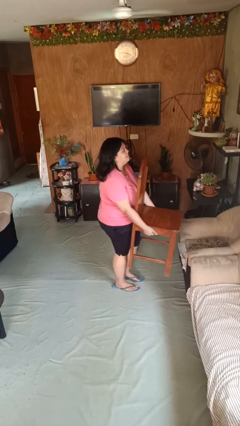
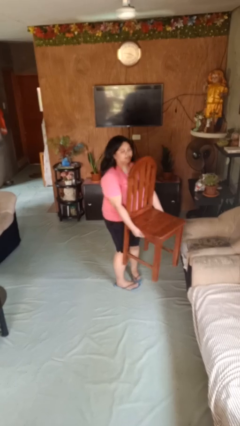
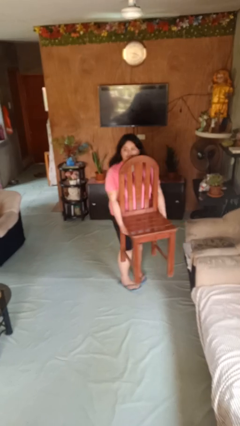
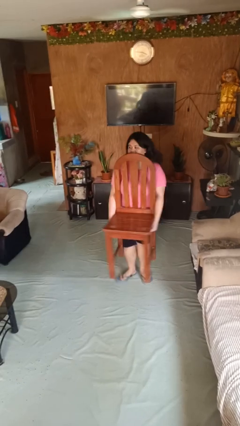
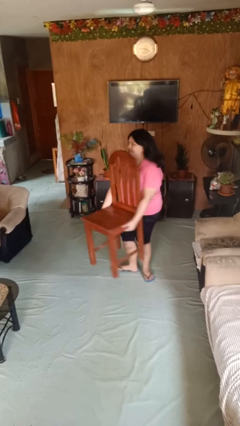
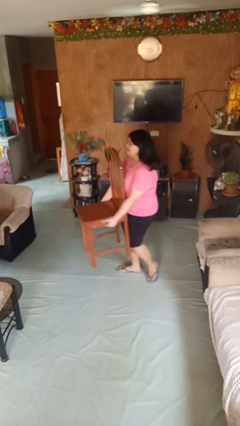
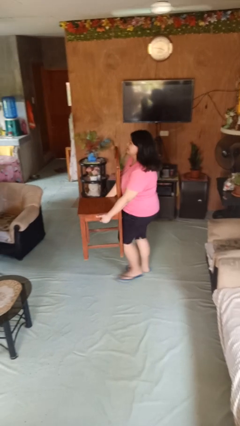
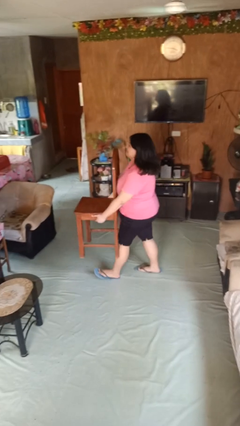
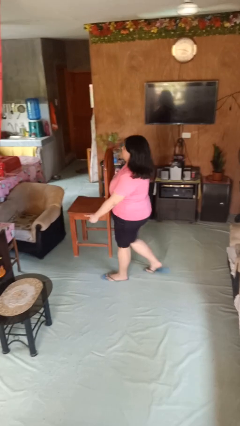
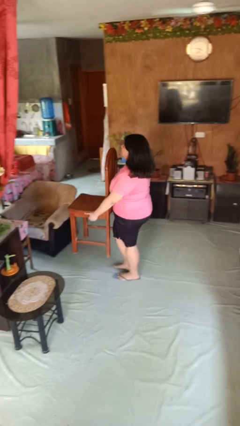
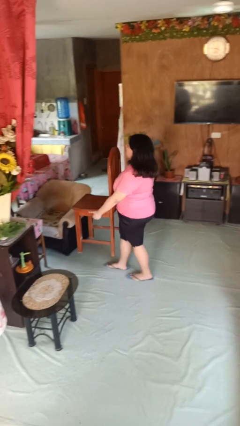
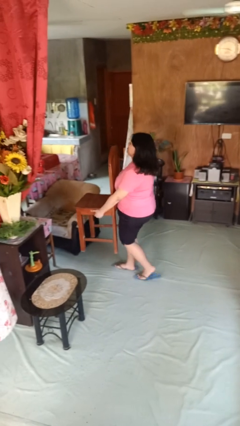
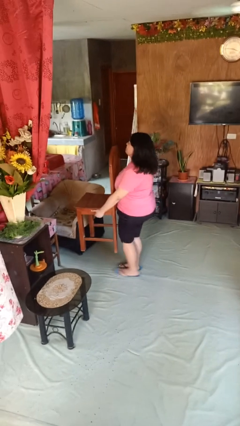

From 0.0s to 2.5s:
person carries furniture

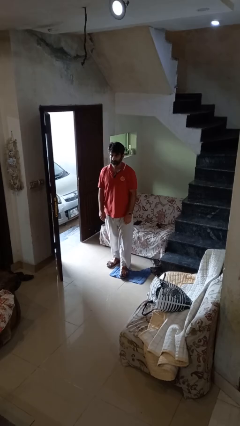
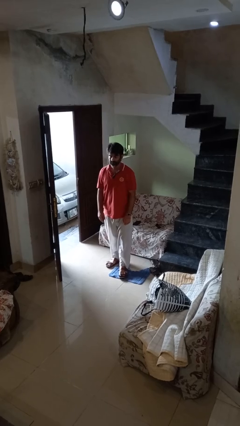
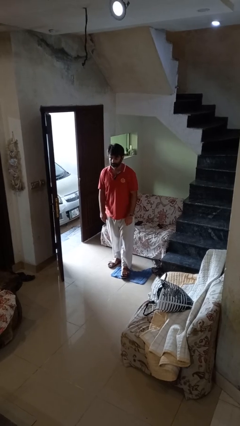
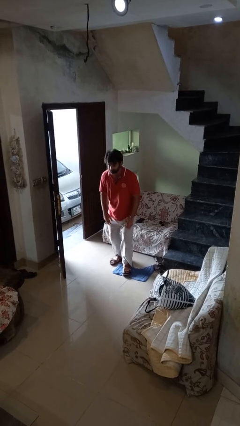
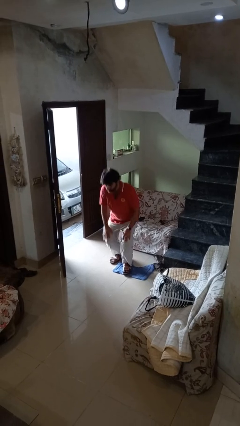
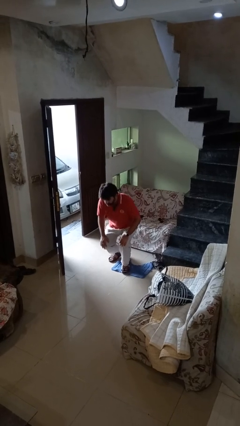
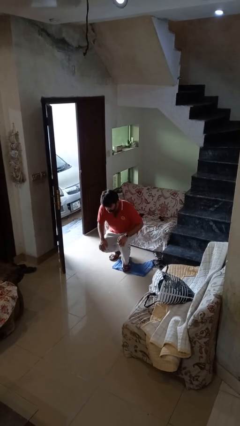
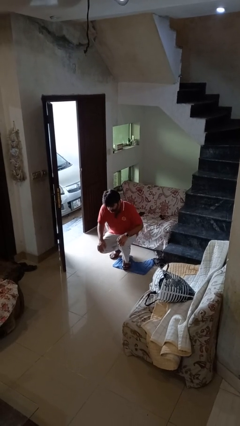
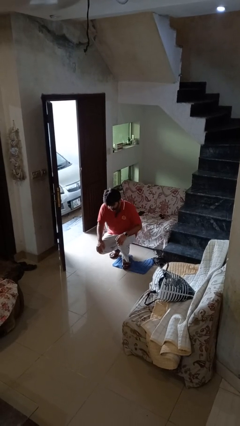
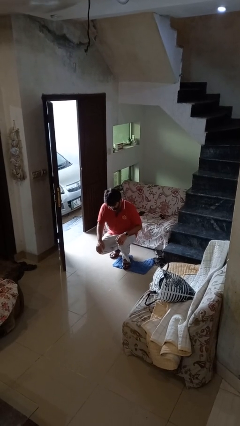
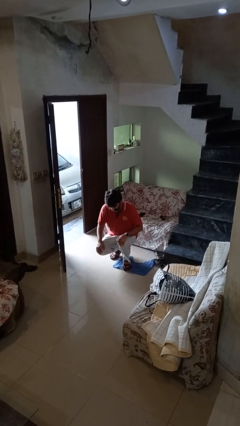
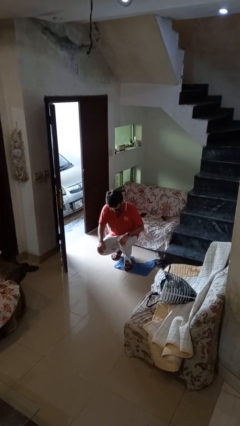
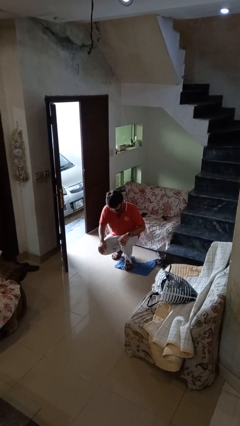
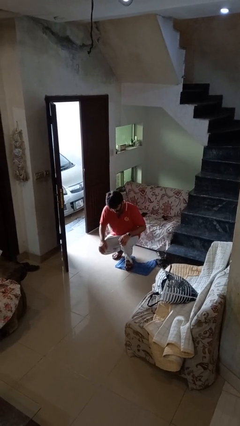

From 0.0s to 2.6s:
person squats

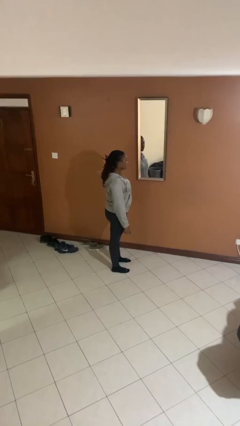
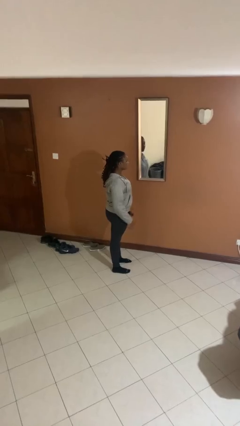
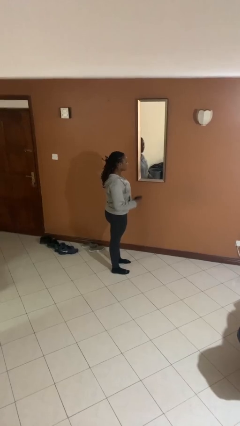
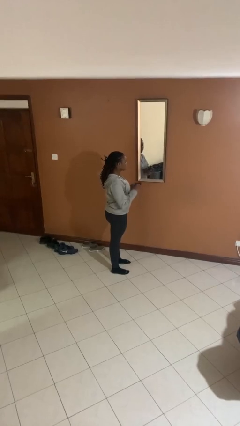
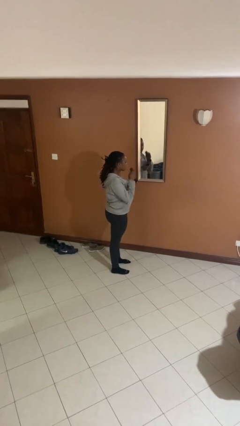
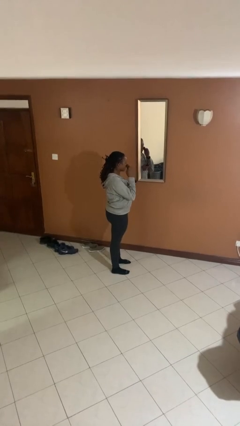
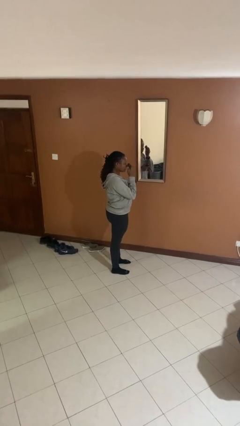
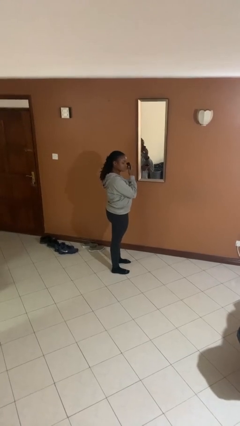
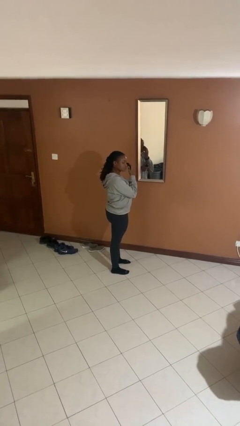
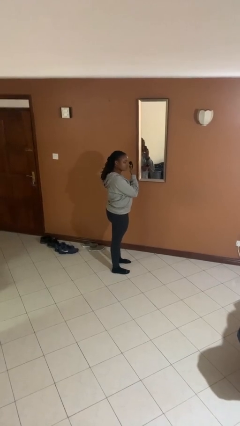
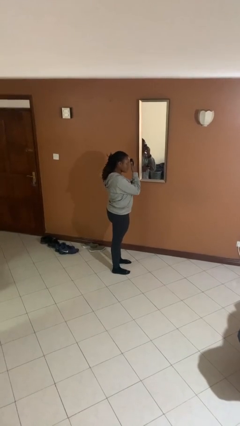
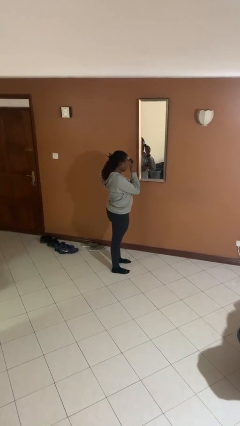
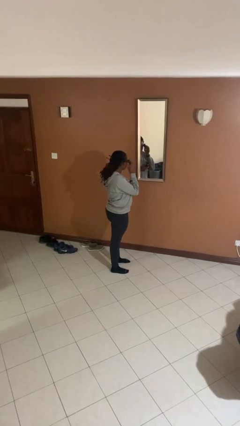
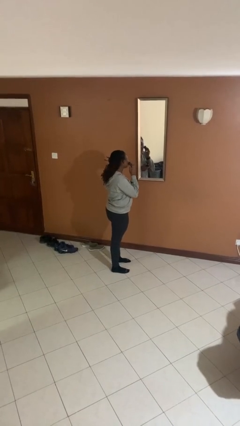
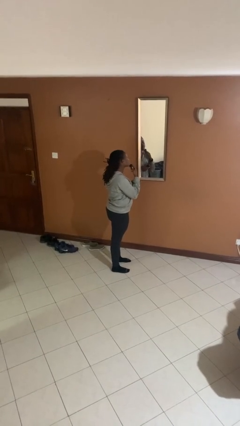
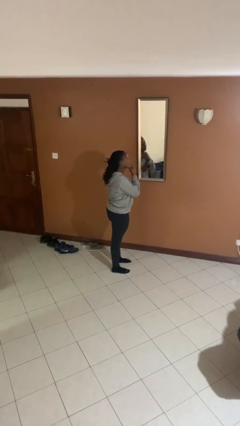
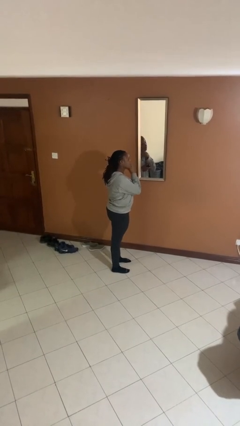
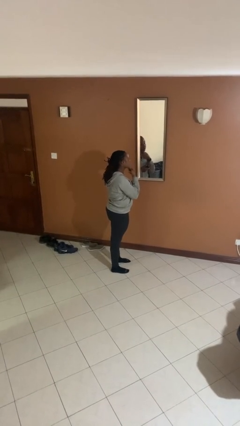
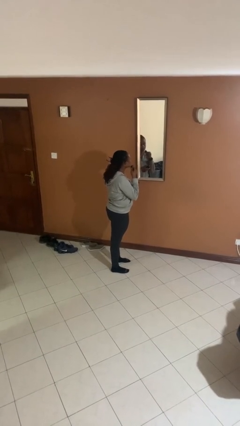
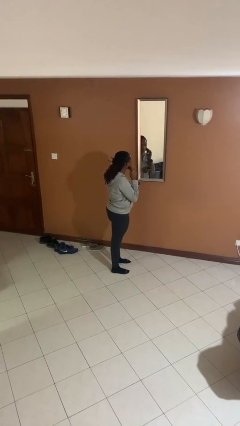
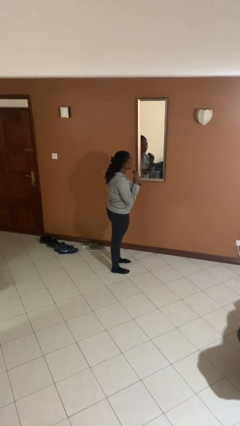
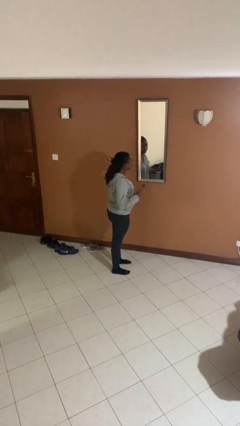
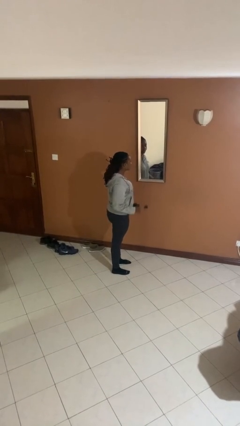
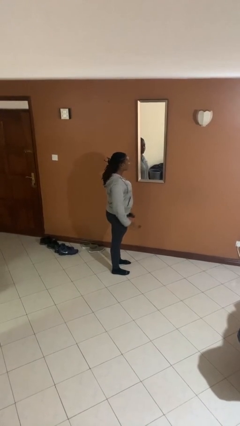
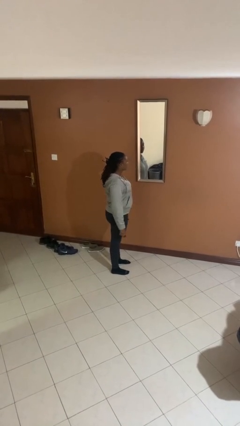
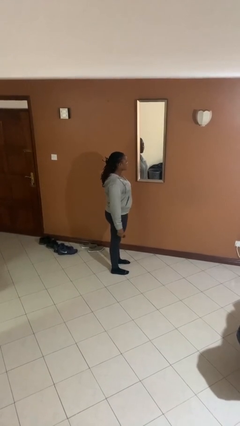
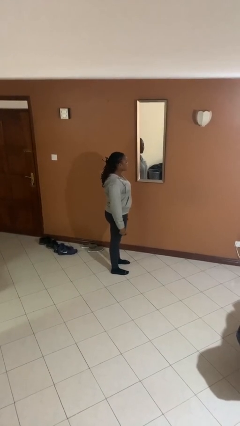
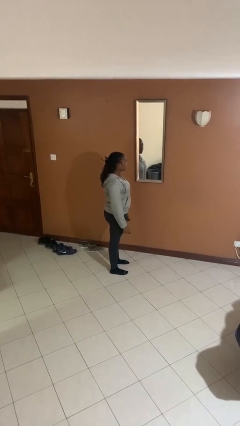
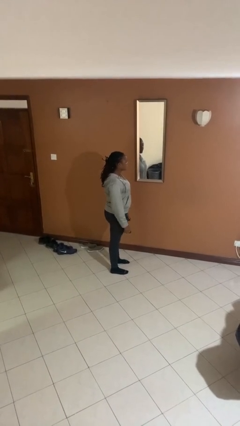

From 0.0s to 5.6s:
person applies foundation makeup

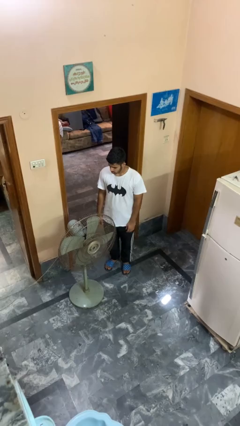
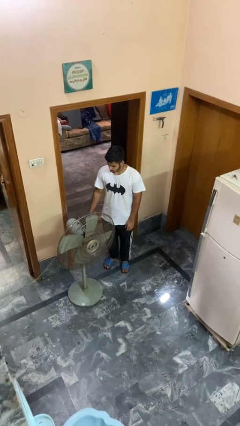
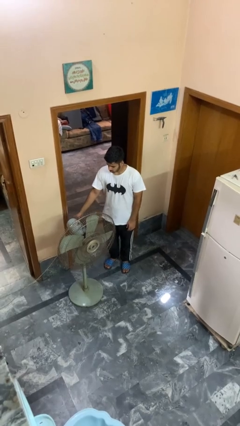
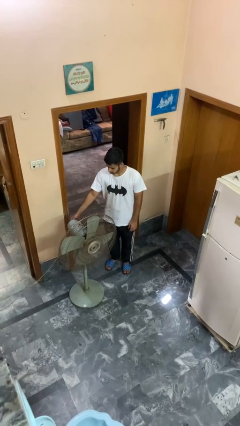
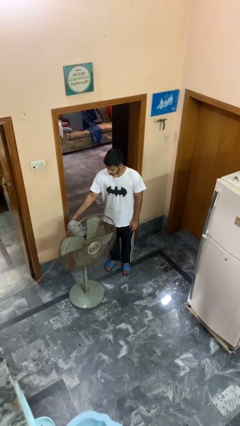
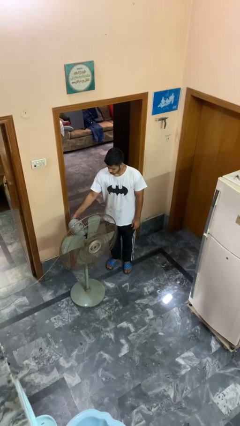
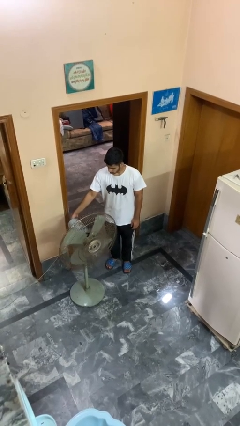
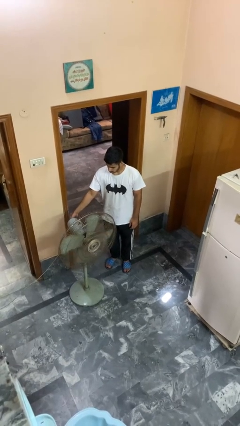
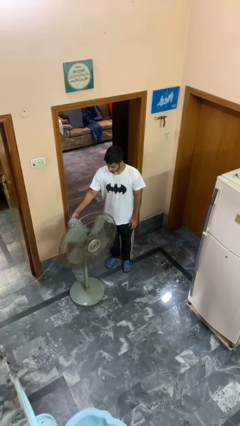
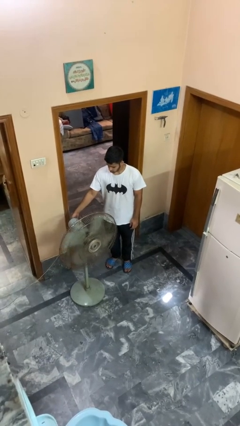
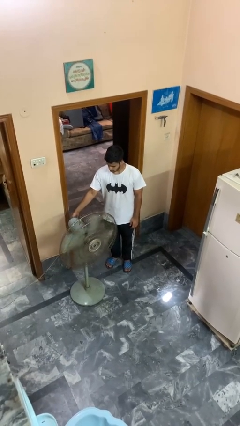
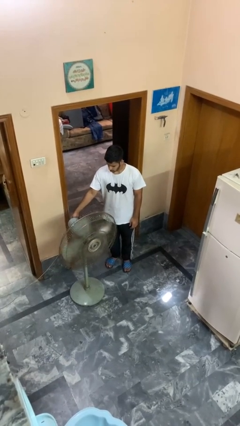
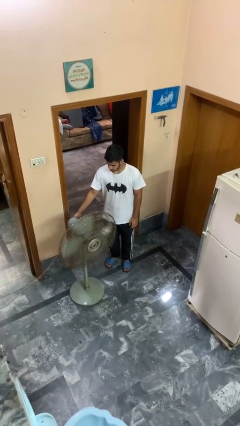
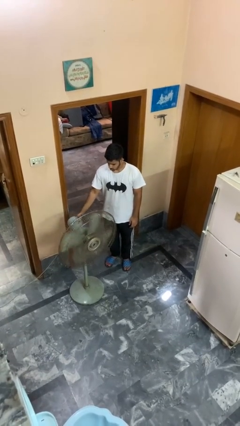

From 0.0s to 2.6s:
person turns on fan

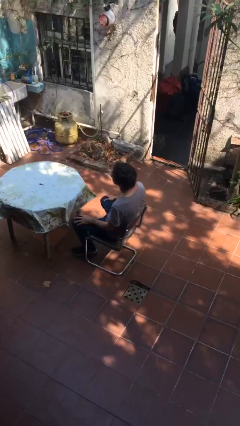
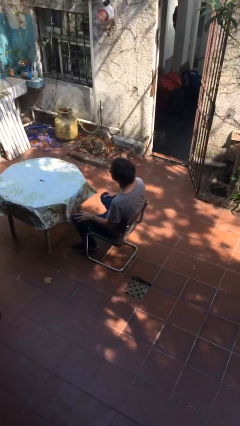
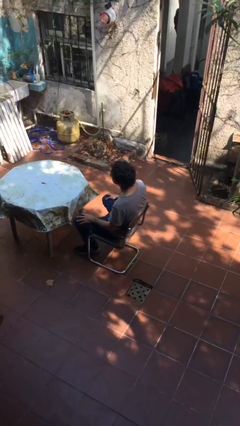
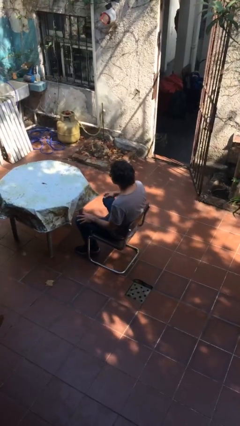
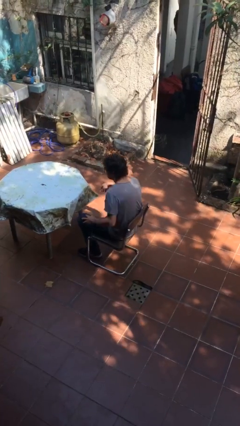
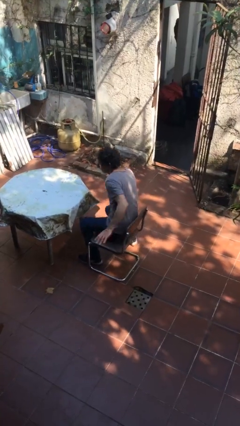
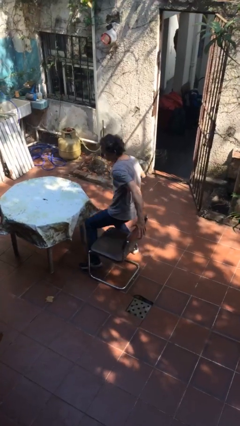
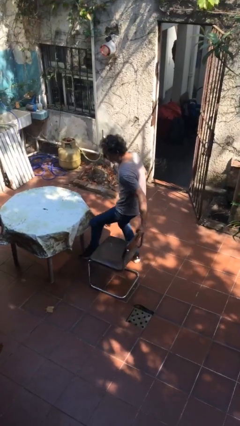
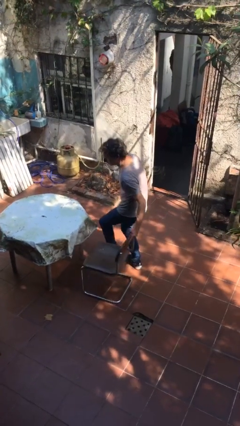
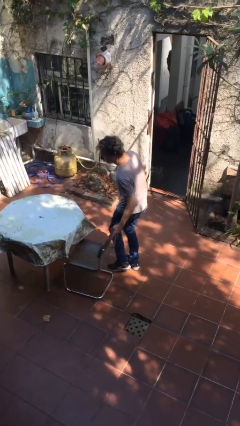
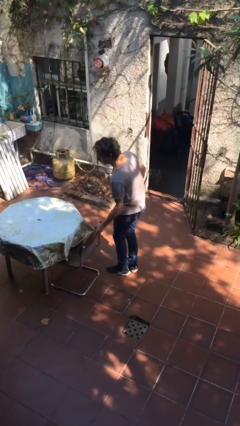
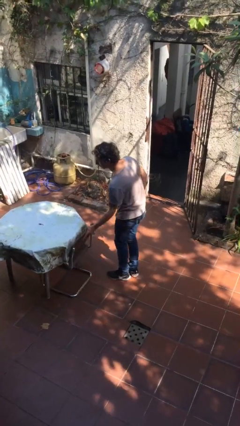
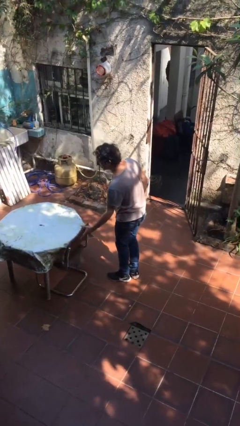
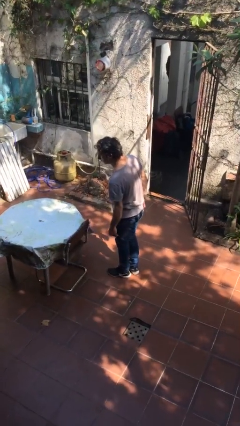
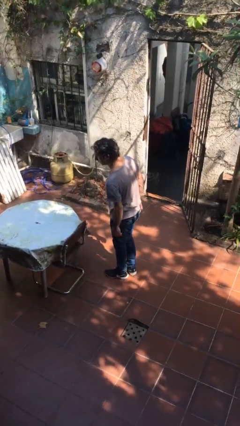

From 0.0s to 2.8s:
person stands up

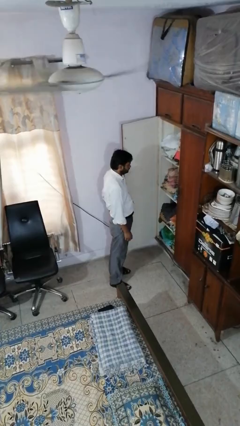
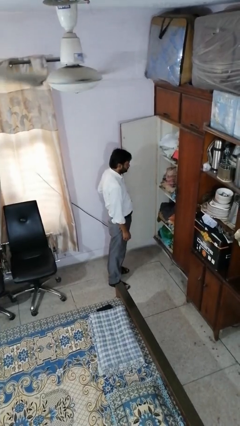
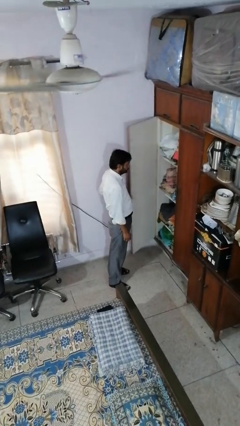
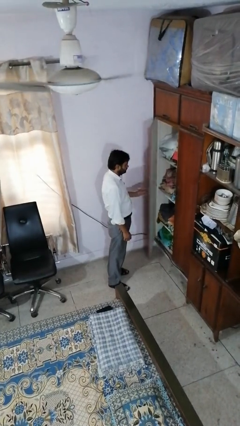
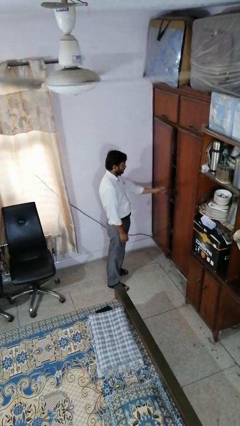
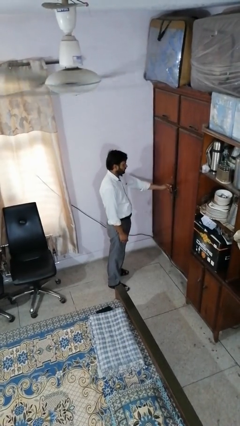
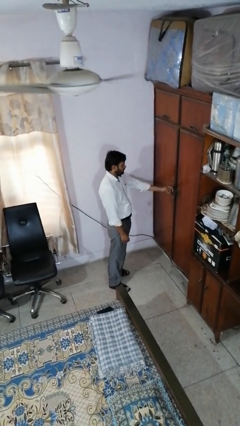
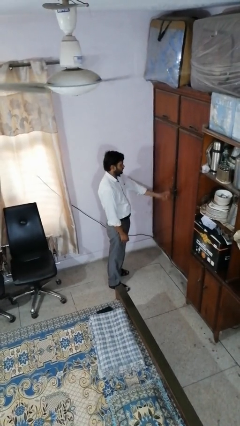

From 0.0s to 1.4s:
person closes closet door

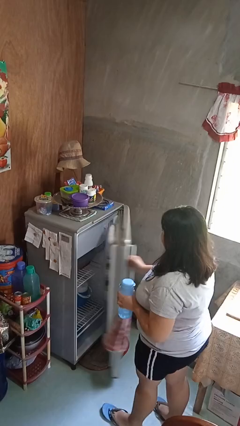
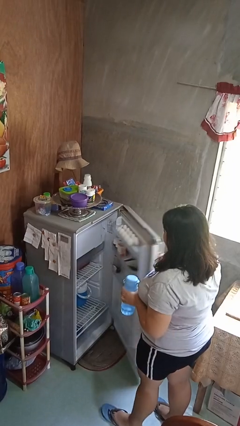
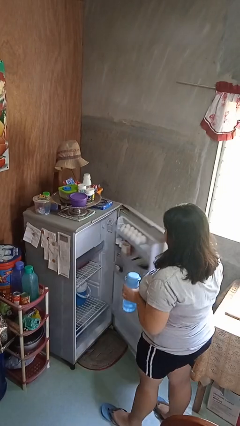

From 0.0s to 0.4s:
person opens refrigerator
